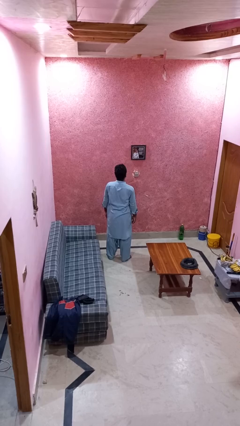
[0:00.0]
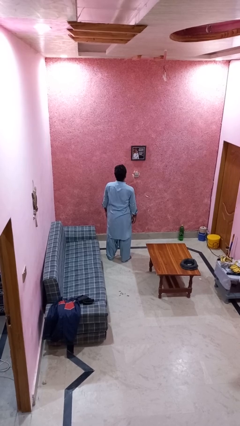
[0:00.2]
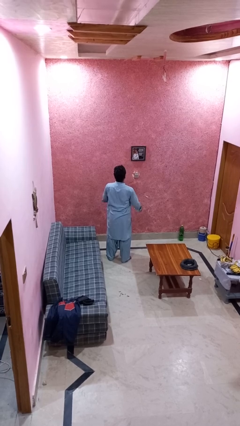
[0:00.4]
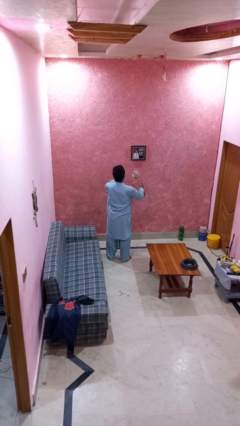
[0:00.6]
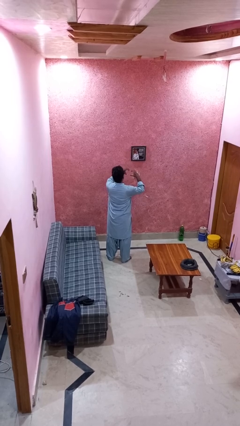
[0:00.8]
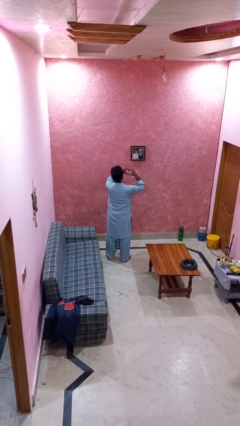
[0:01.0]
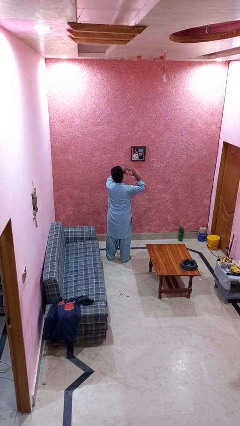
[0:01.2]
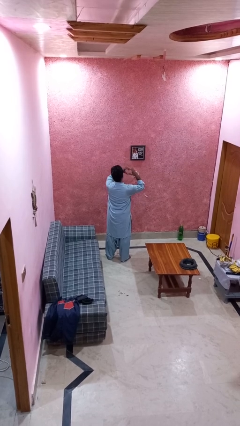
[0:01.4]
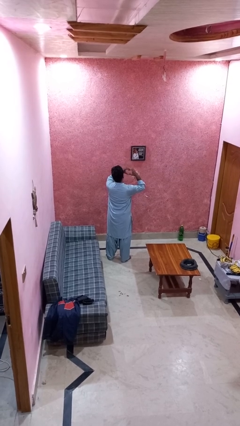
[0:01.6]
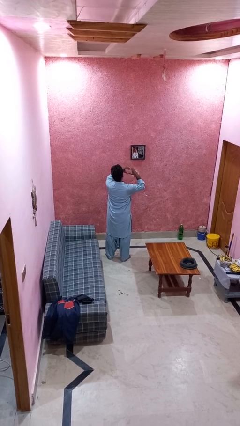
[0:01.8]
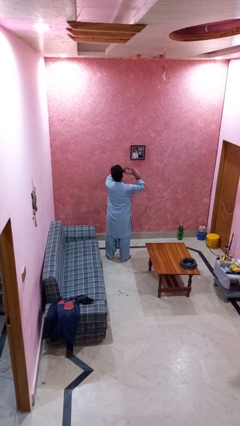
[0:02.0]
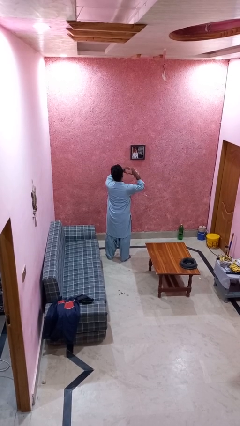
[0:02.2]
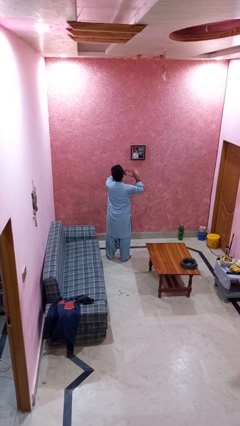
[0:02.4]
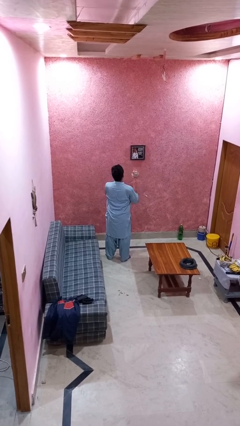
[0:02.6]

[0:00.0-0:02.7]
person gestures heart

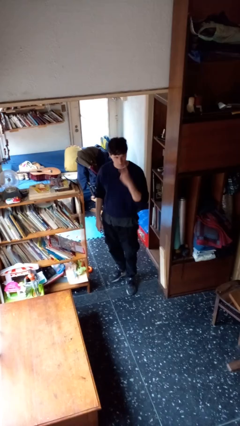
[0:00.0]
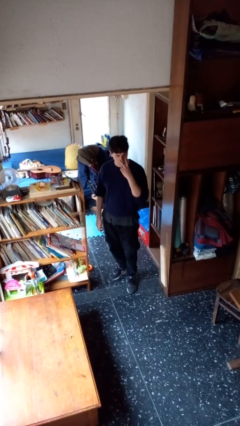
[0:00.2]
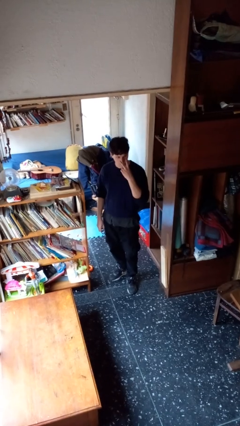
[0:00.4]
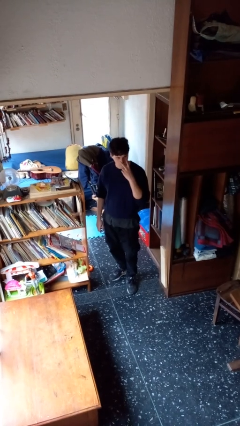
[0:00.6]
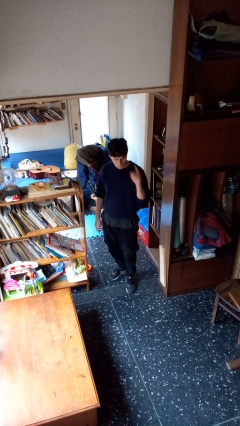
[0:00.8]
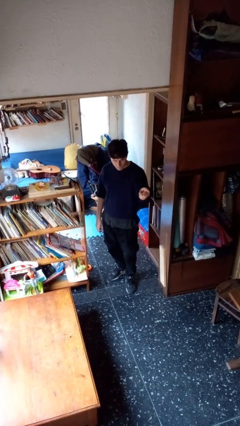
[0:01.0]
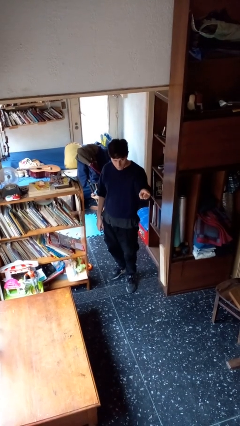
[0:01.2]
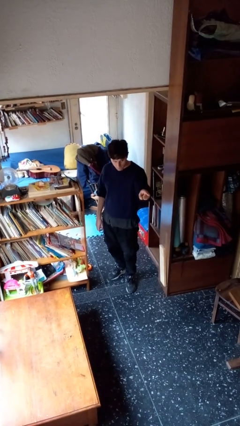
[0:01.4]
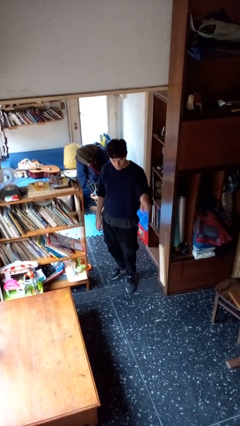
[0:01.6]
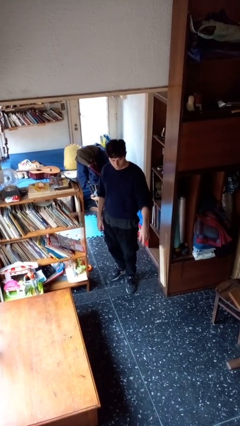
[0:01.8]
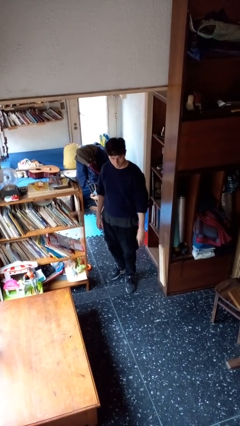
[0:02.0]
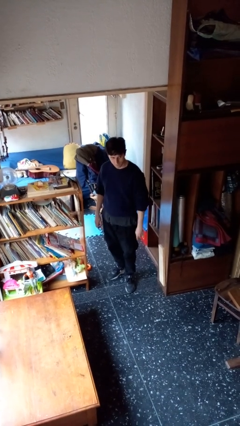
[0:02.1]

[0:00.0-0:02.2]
person gestures watch closely

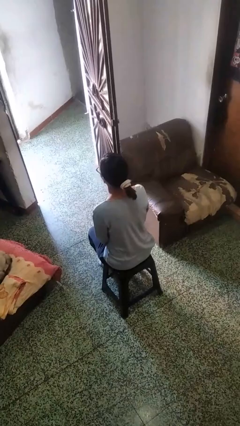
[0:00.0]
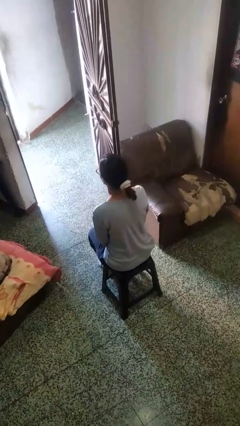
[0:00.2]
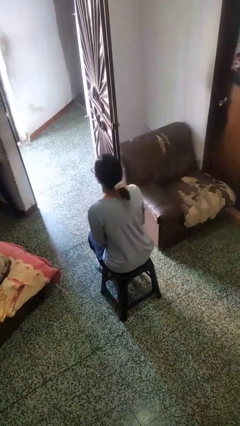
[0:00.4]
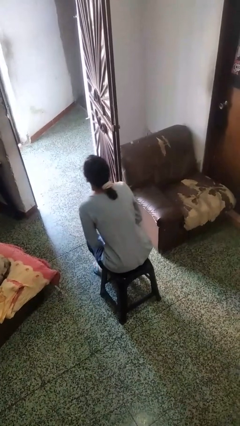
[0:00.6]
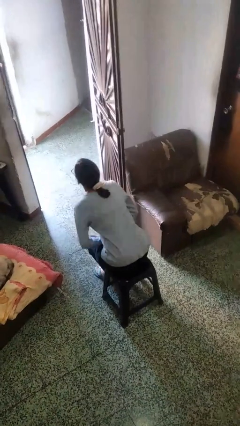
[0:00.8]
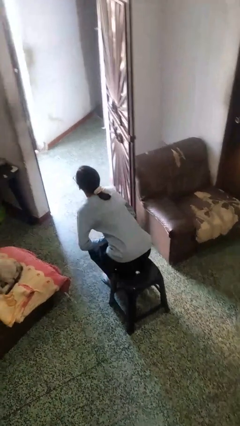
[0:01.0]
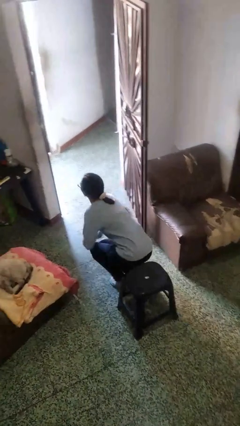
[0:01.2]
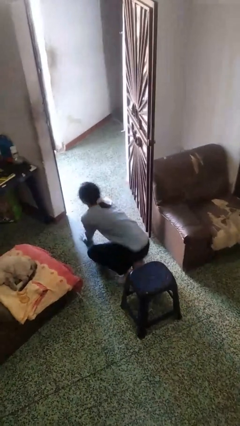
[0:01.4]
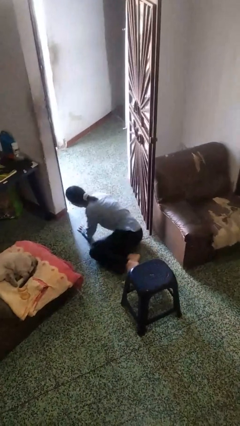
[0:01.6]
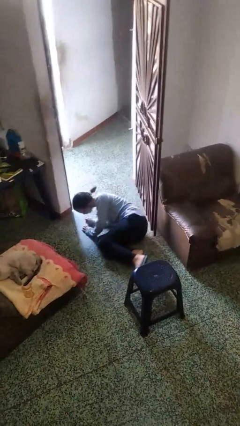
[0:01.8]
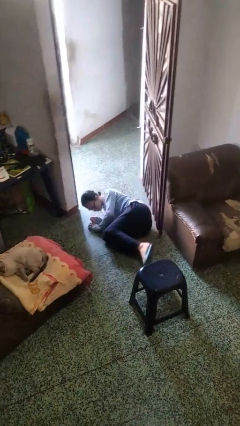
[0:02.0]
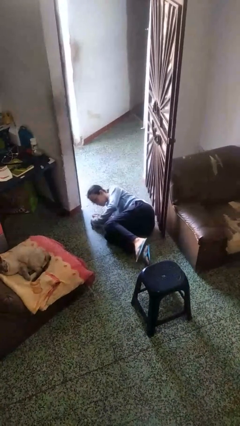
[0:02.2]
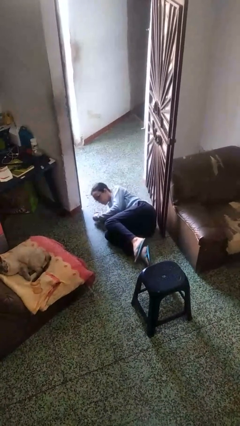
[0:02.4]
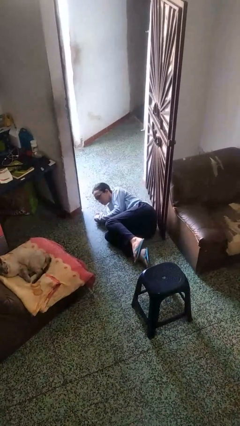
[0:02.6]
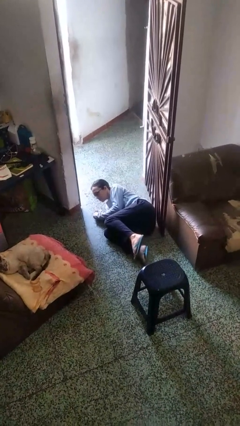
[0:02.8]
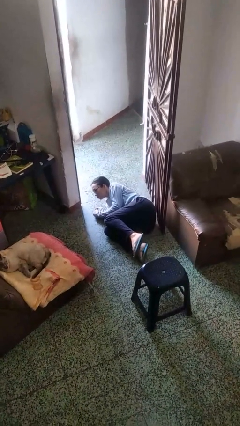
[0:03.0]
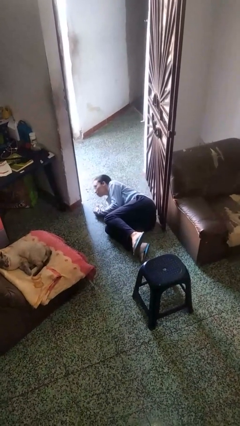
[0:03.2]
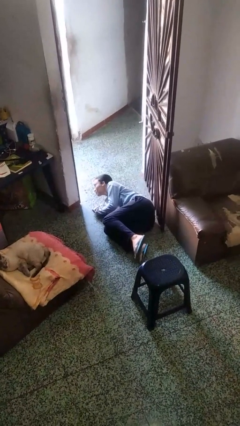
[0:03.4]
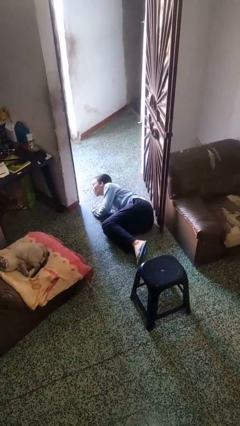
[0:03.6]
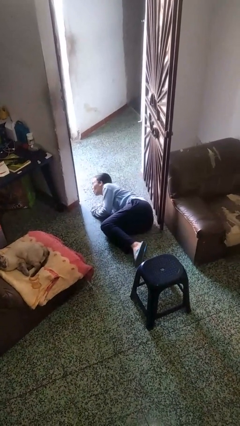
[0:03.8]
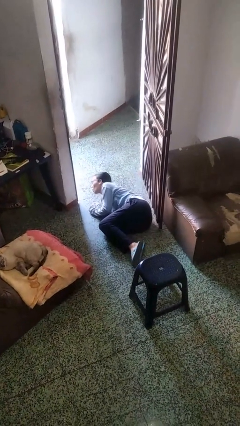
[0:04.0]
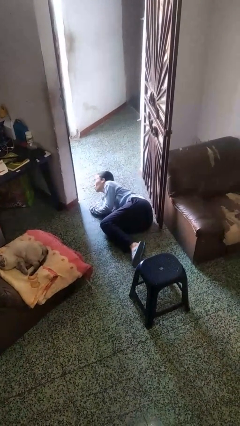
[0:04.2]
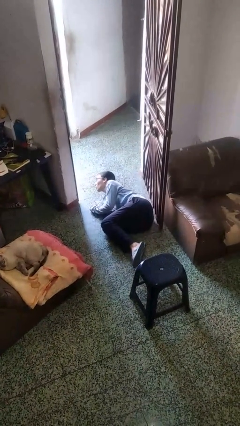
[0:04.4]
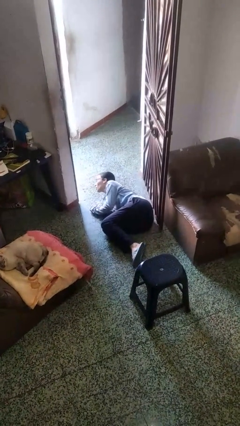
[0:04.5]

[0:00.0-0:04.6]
person falls from chair

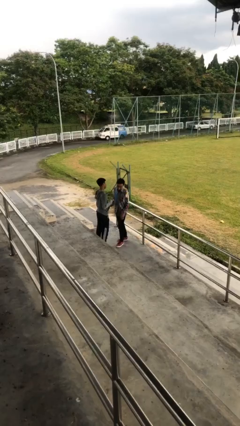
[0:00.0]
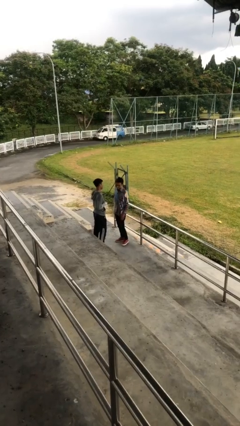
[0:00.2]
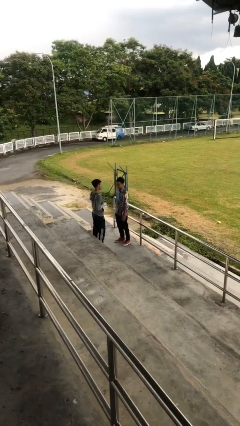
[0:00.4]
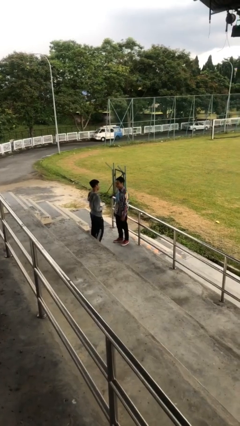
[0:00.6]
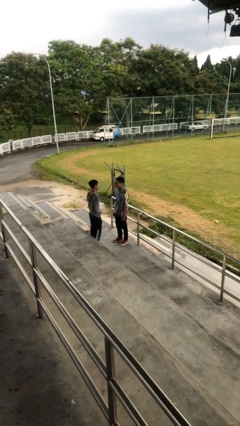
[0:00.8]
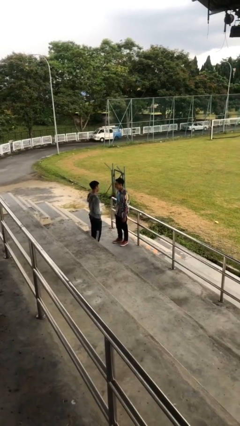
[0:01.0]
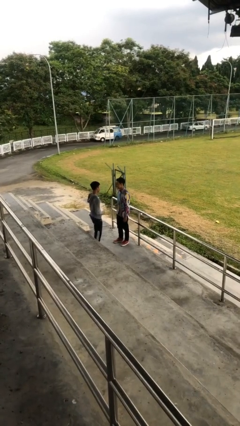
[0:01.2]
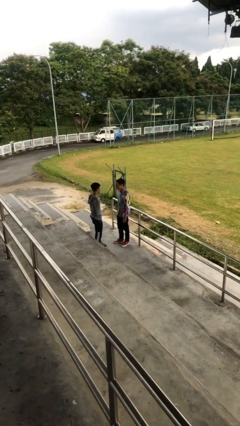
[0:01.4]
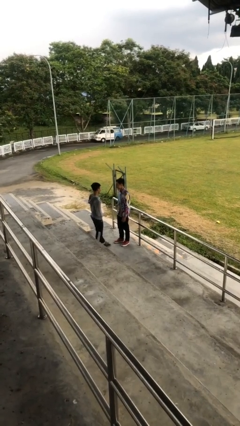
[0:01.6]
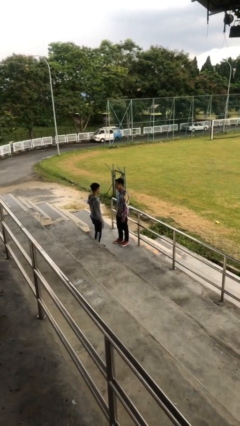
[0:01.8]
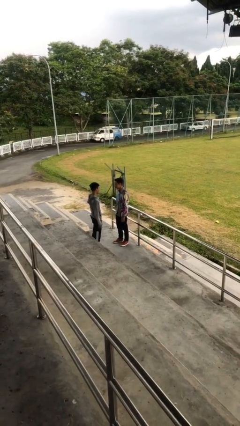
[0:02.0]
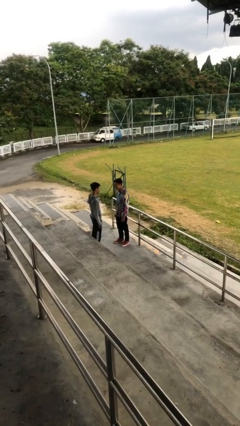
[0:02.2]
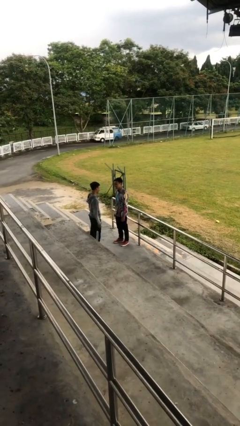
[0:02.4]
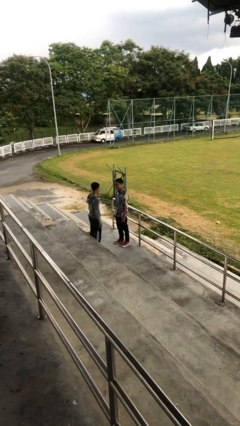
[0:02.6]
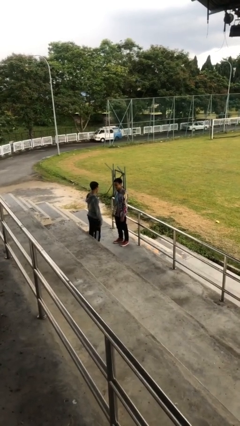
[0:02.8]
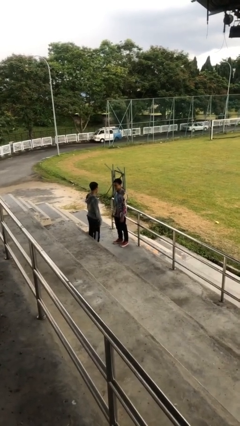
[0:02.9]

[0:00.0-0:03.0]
person talks to person

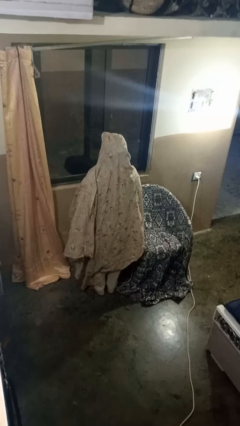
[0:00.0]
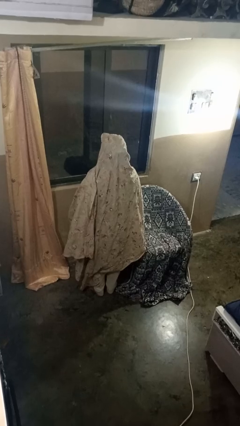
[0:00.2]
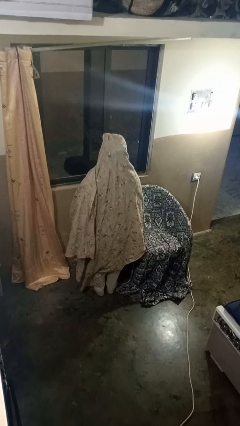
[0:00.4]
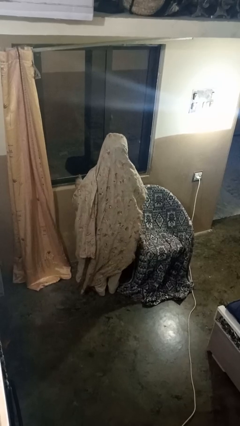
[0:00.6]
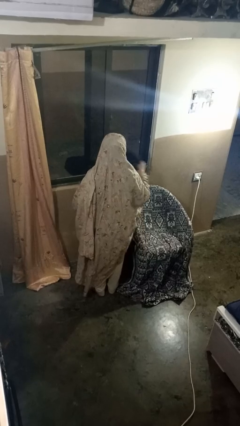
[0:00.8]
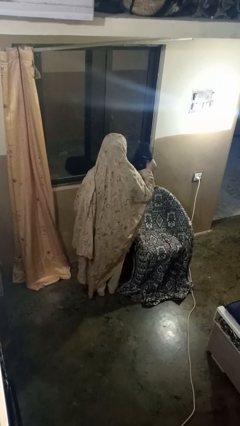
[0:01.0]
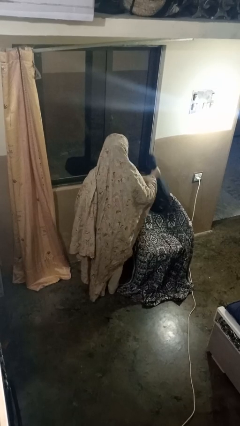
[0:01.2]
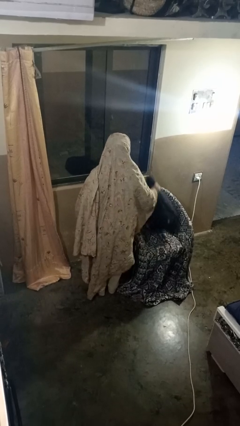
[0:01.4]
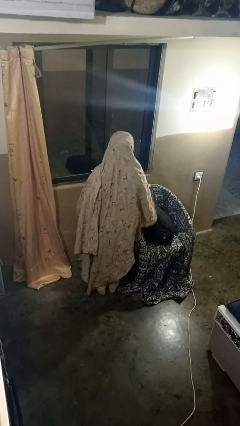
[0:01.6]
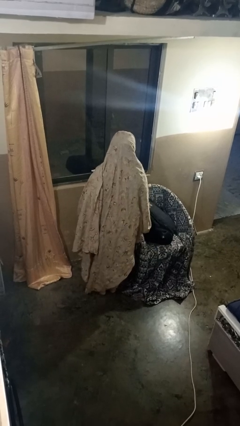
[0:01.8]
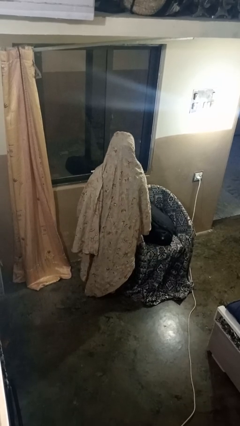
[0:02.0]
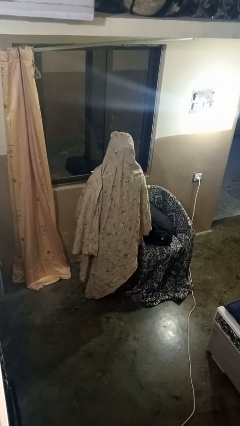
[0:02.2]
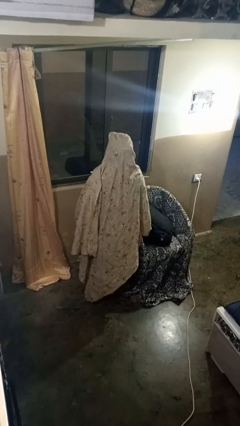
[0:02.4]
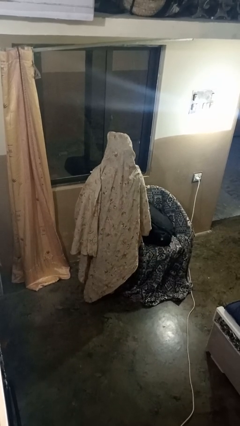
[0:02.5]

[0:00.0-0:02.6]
person puts down object on couch

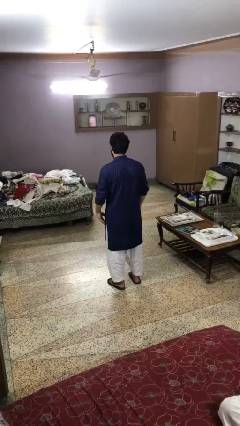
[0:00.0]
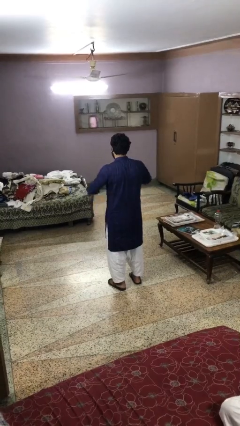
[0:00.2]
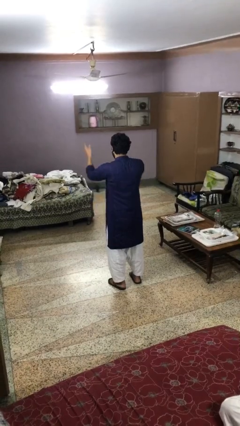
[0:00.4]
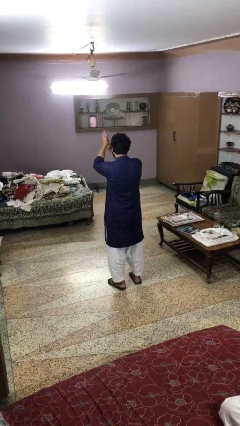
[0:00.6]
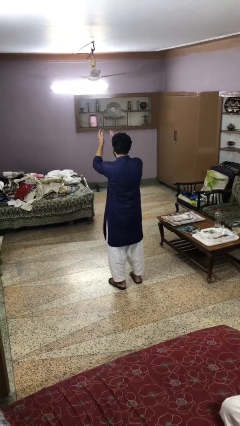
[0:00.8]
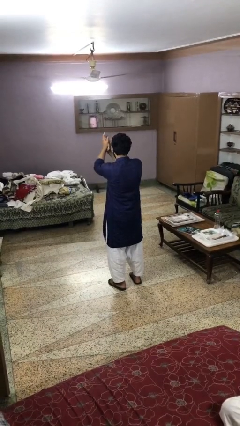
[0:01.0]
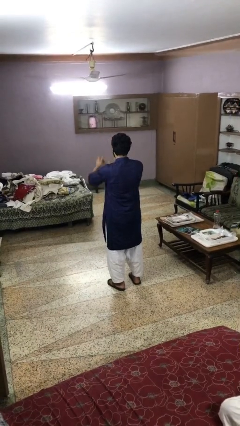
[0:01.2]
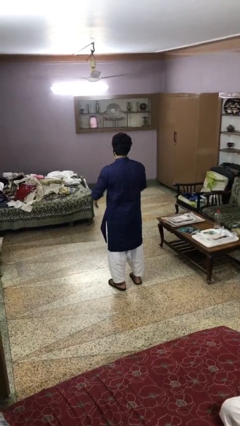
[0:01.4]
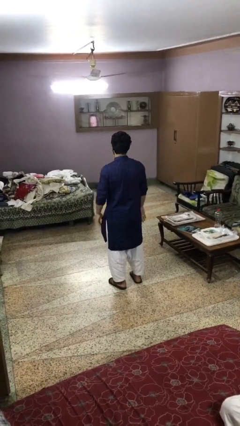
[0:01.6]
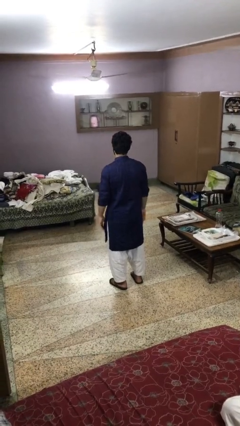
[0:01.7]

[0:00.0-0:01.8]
person claps hands

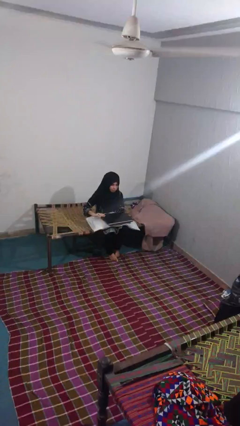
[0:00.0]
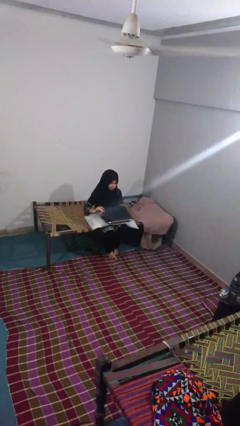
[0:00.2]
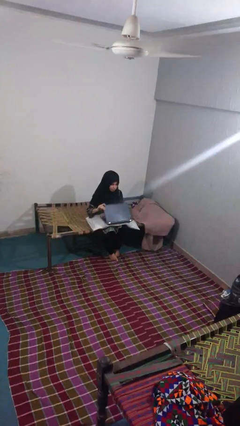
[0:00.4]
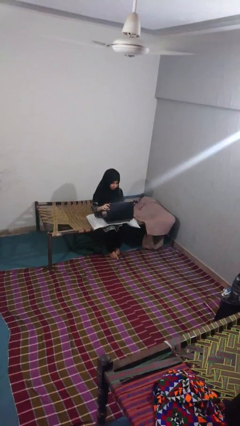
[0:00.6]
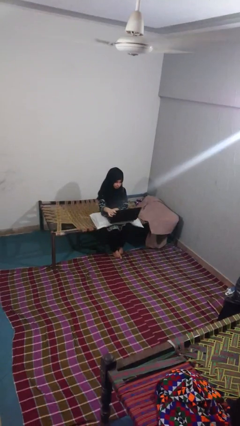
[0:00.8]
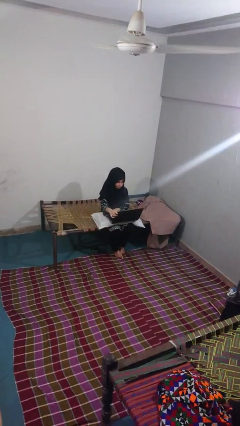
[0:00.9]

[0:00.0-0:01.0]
person opens laptop
